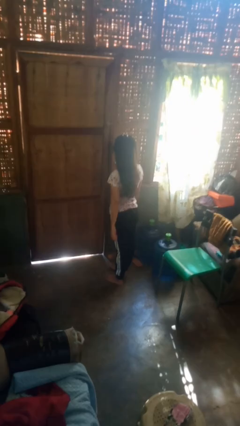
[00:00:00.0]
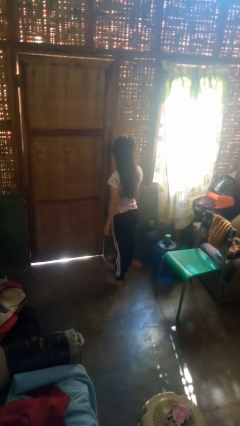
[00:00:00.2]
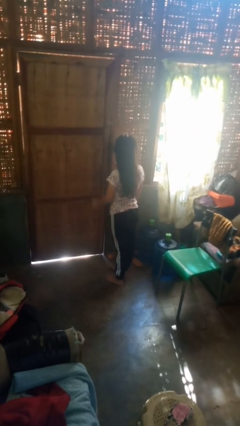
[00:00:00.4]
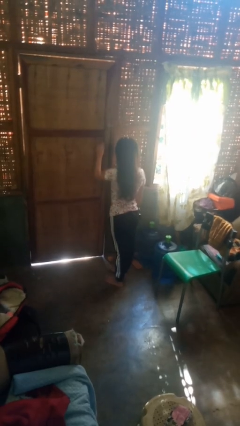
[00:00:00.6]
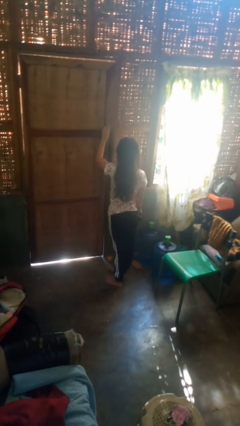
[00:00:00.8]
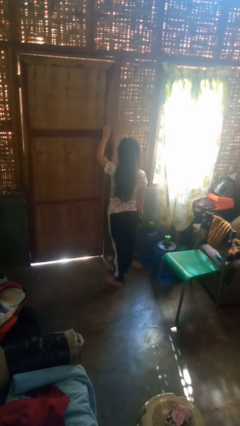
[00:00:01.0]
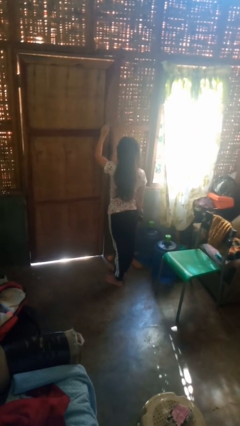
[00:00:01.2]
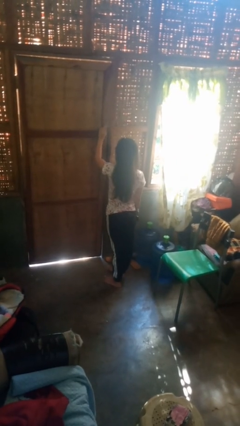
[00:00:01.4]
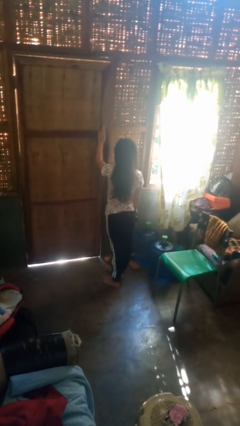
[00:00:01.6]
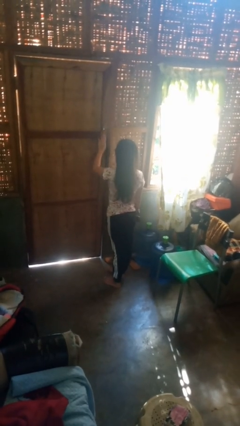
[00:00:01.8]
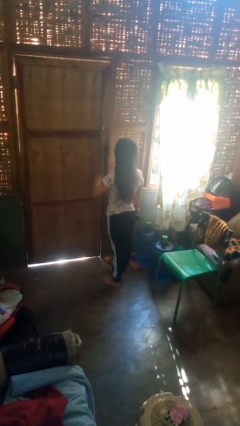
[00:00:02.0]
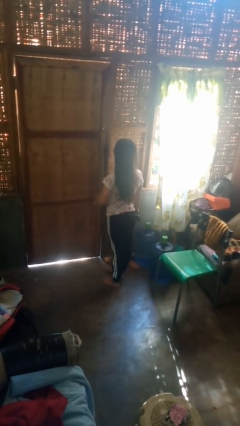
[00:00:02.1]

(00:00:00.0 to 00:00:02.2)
person unlocks door with keys

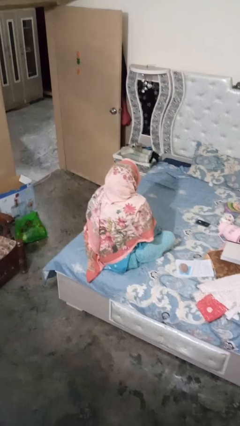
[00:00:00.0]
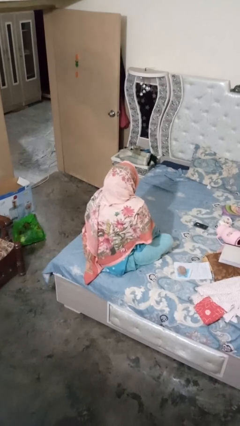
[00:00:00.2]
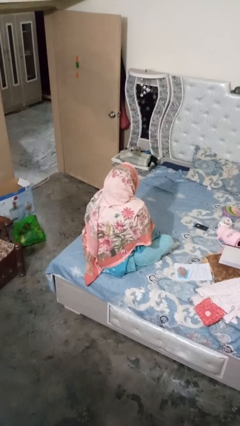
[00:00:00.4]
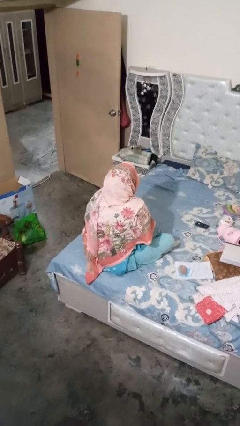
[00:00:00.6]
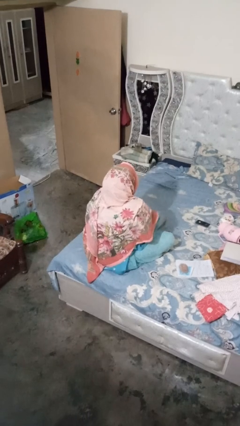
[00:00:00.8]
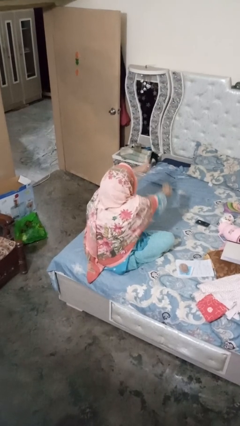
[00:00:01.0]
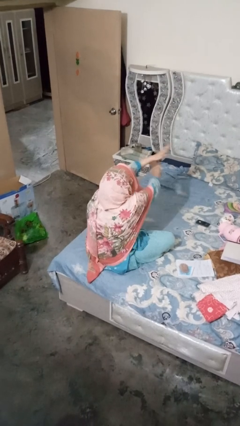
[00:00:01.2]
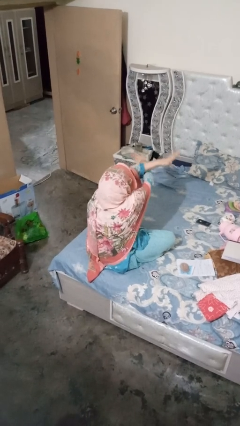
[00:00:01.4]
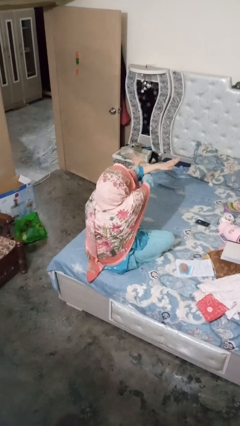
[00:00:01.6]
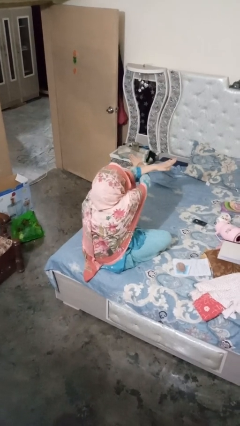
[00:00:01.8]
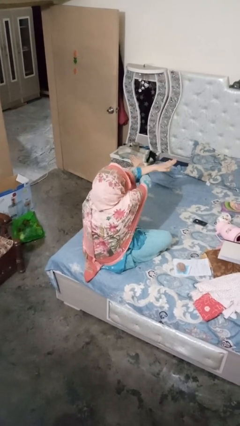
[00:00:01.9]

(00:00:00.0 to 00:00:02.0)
person gestures arms x

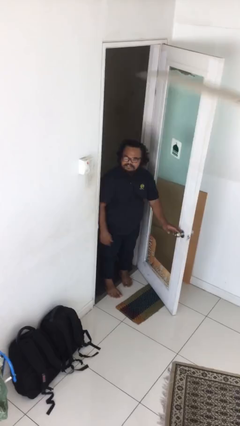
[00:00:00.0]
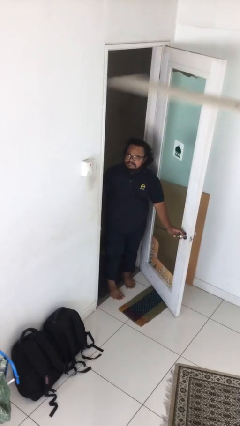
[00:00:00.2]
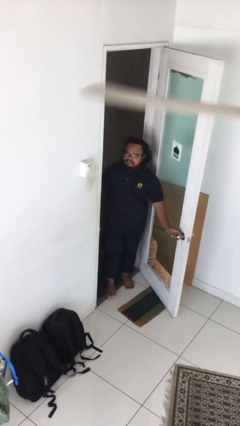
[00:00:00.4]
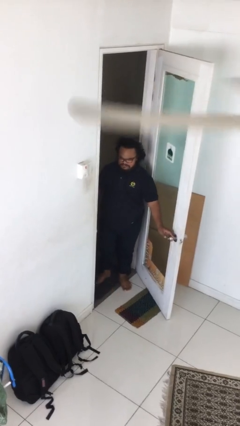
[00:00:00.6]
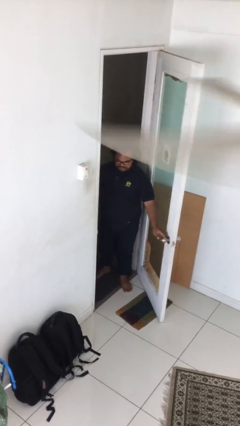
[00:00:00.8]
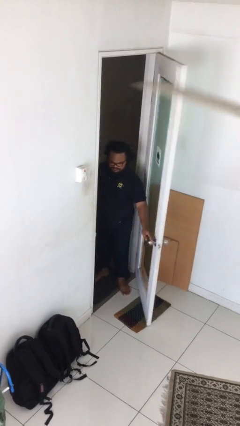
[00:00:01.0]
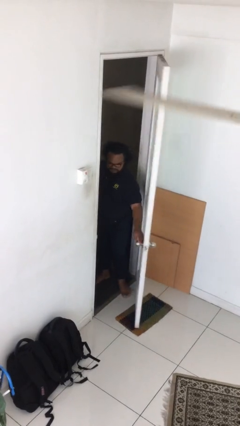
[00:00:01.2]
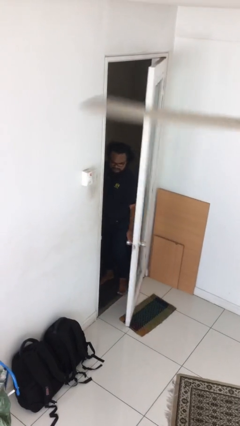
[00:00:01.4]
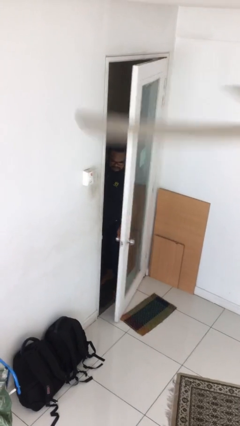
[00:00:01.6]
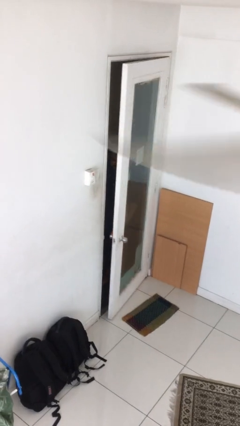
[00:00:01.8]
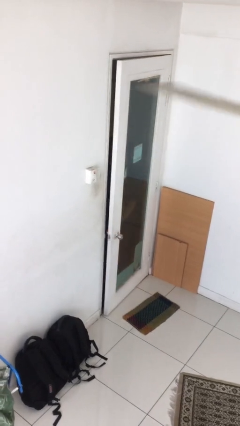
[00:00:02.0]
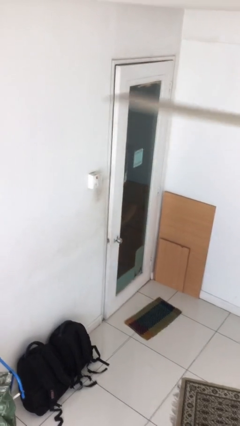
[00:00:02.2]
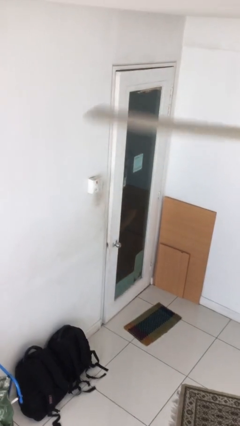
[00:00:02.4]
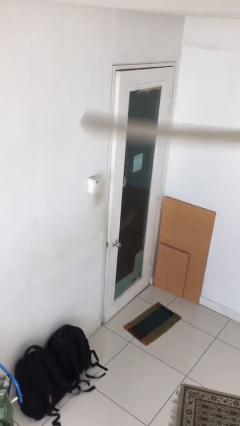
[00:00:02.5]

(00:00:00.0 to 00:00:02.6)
person closes facility door

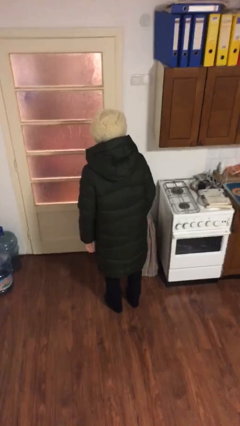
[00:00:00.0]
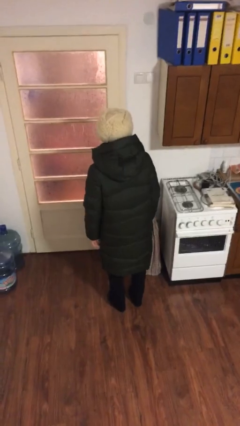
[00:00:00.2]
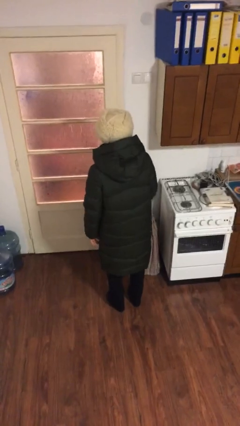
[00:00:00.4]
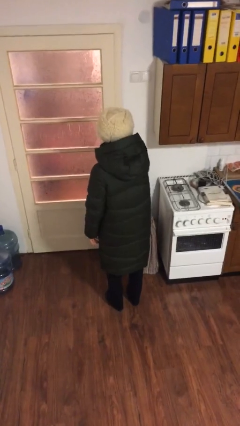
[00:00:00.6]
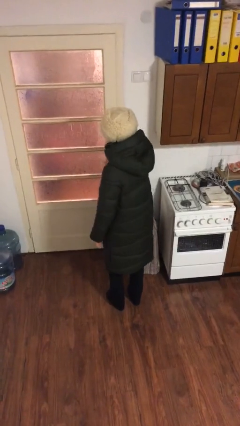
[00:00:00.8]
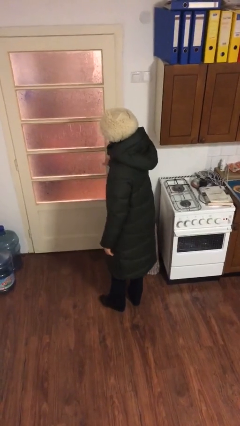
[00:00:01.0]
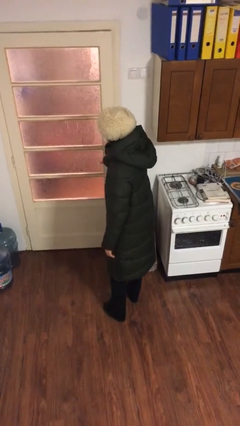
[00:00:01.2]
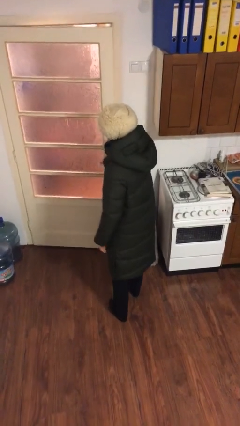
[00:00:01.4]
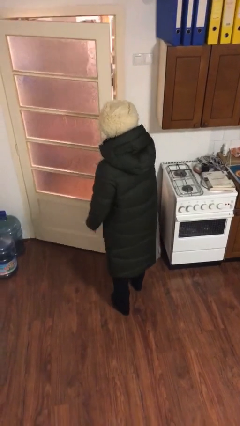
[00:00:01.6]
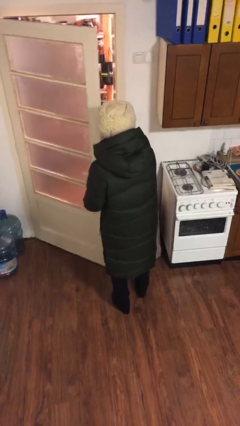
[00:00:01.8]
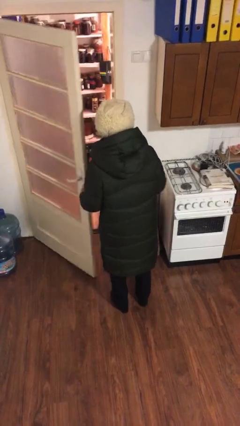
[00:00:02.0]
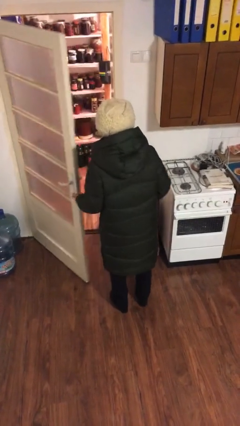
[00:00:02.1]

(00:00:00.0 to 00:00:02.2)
person opens facility door

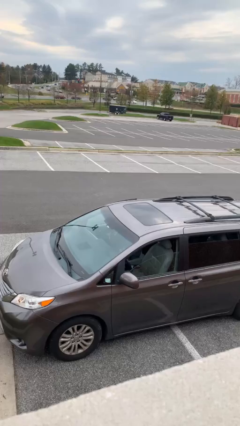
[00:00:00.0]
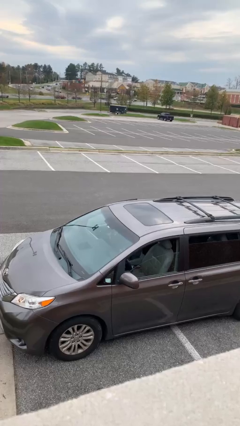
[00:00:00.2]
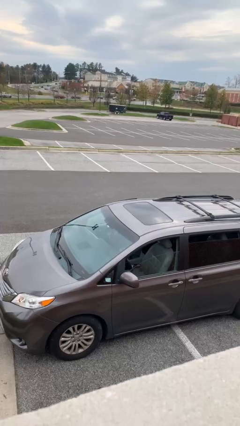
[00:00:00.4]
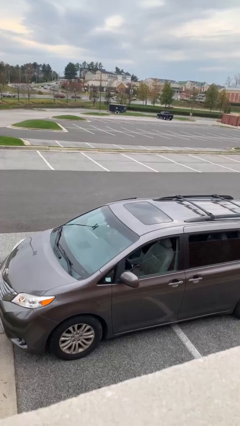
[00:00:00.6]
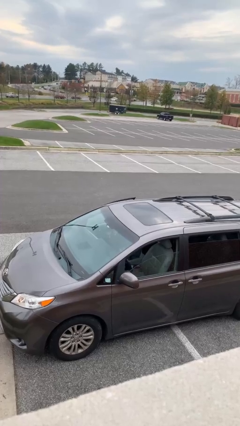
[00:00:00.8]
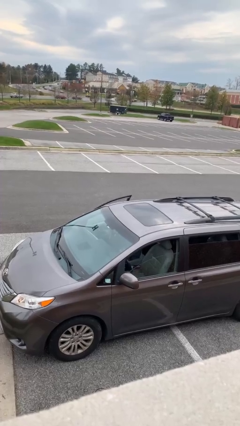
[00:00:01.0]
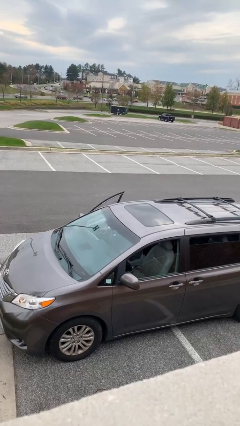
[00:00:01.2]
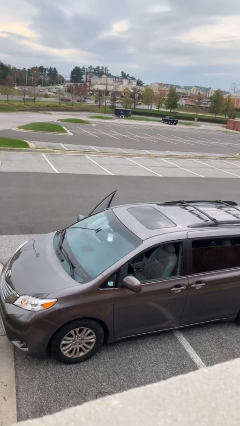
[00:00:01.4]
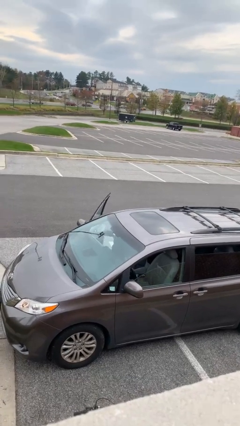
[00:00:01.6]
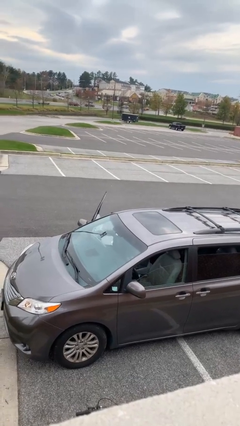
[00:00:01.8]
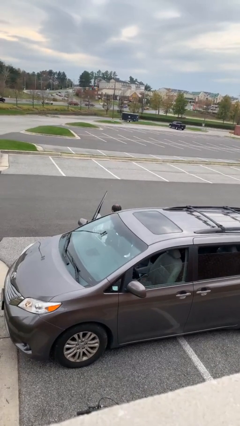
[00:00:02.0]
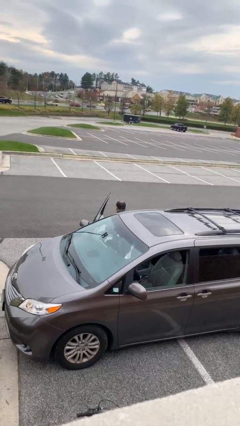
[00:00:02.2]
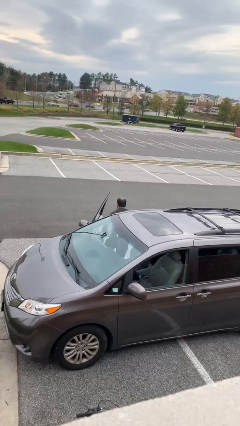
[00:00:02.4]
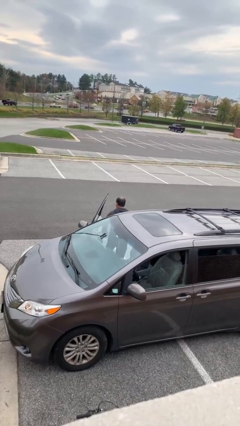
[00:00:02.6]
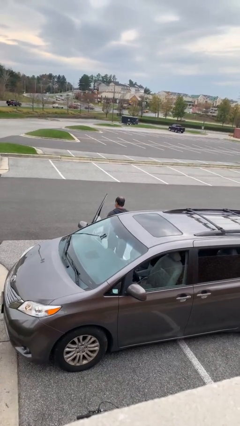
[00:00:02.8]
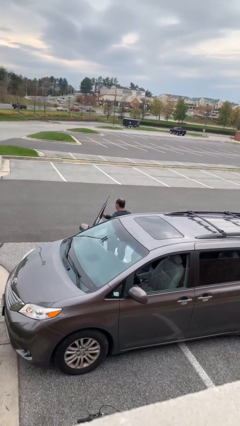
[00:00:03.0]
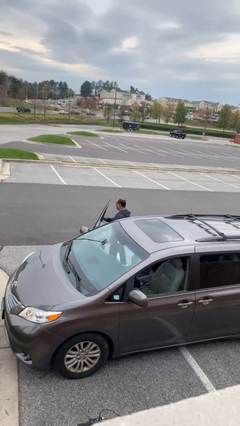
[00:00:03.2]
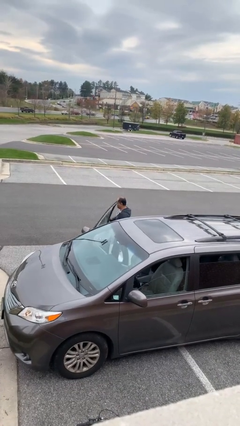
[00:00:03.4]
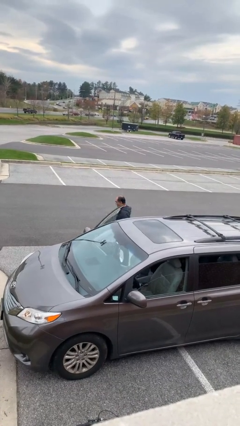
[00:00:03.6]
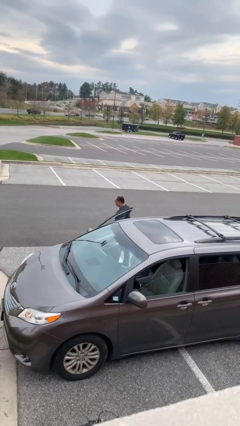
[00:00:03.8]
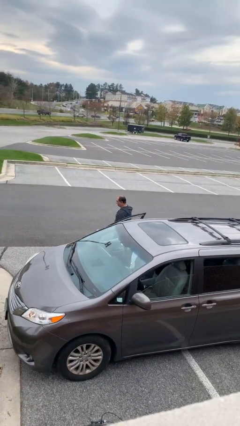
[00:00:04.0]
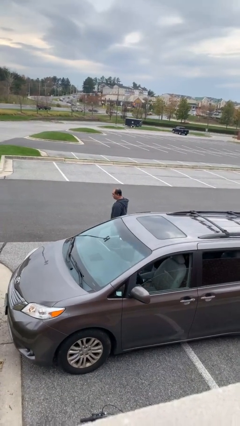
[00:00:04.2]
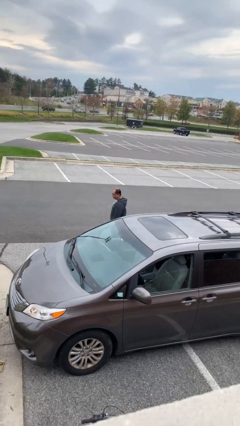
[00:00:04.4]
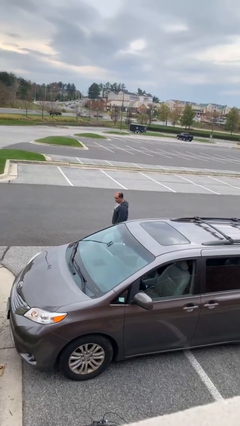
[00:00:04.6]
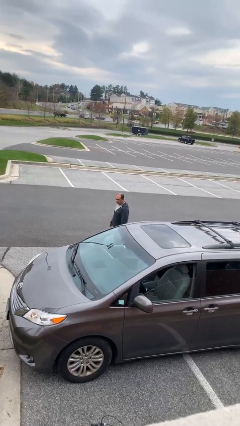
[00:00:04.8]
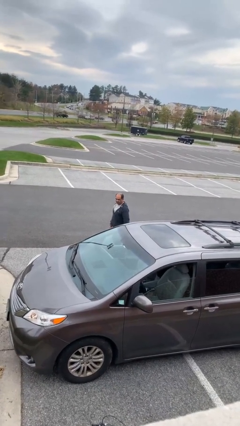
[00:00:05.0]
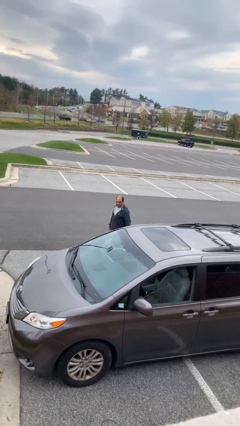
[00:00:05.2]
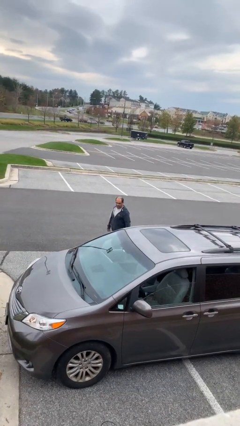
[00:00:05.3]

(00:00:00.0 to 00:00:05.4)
car drops off person

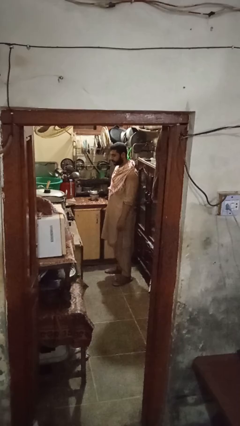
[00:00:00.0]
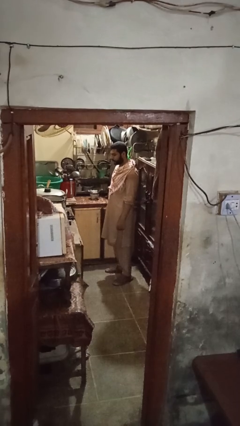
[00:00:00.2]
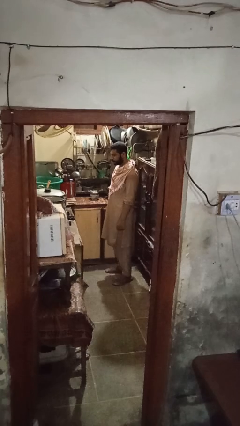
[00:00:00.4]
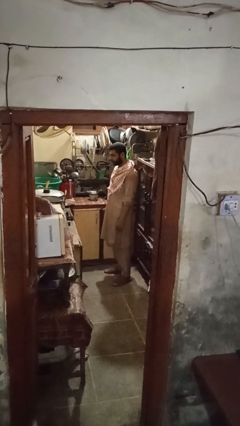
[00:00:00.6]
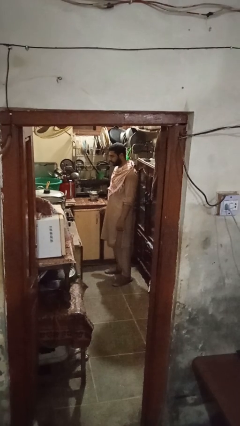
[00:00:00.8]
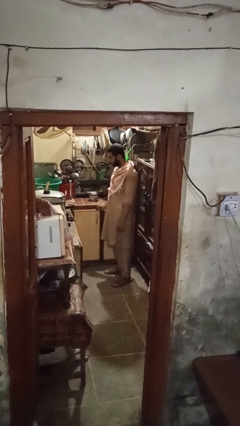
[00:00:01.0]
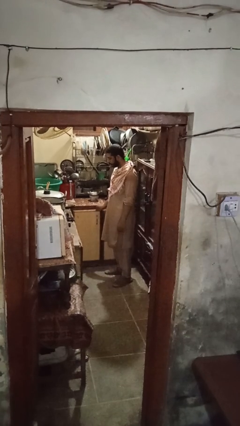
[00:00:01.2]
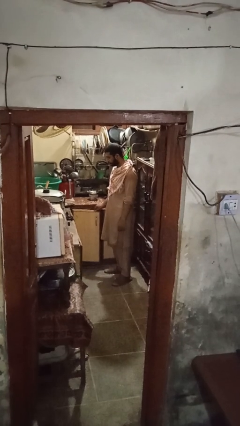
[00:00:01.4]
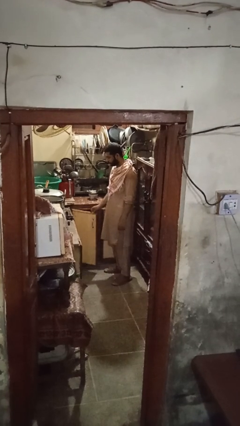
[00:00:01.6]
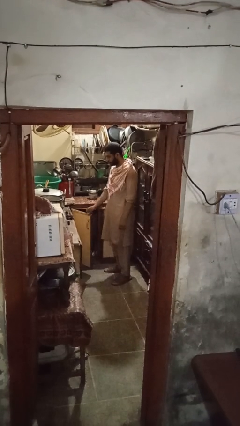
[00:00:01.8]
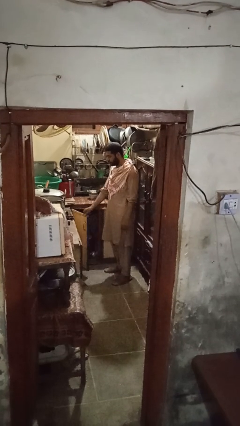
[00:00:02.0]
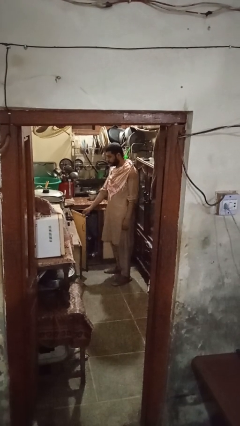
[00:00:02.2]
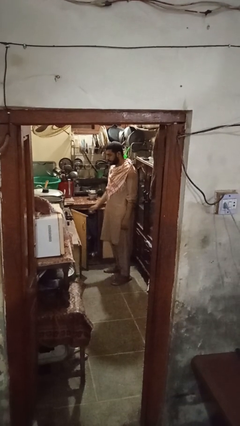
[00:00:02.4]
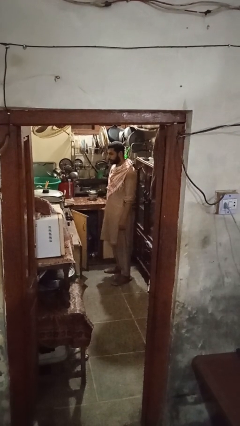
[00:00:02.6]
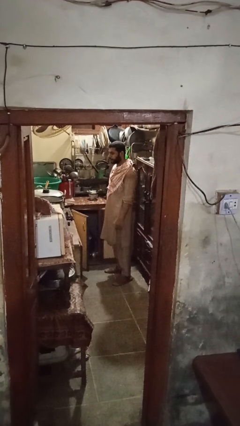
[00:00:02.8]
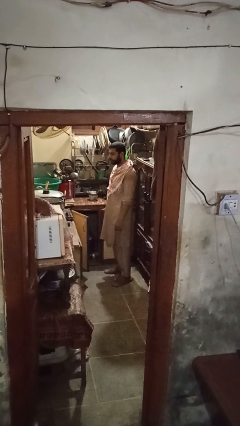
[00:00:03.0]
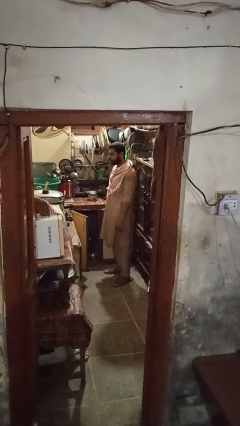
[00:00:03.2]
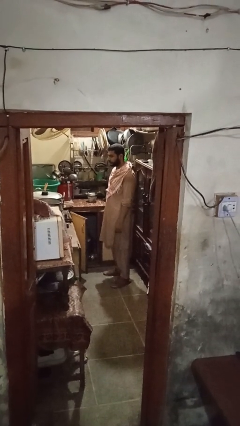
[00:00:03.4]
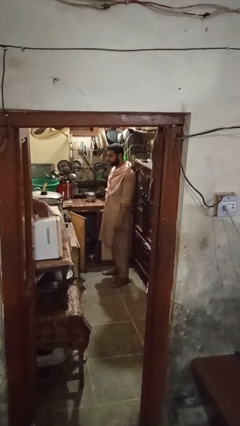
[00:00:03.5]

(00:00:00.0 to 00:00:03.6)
person opens cabinet
